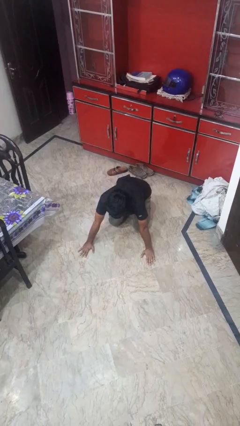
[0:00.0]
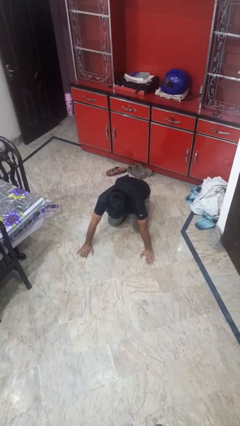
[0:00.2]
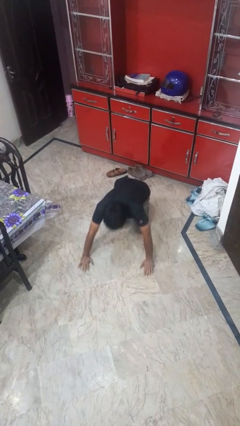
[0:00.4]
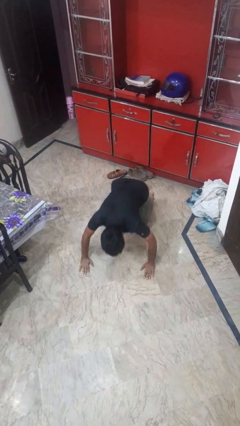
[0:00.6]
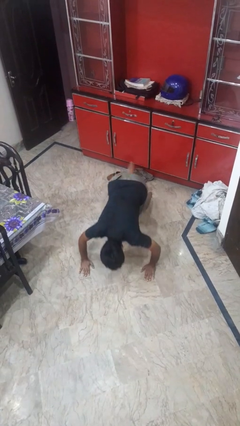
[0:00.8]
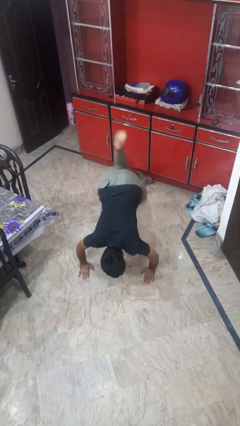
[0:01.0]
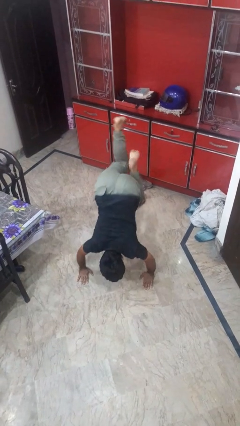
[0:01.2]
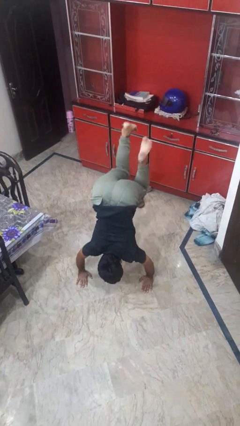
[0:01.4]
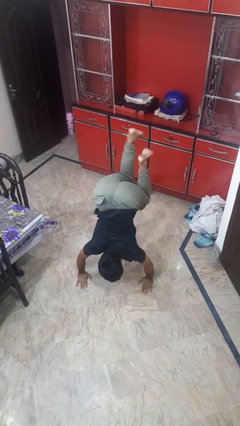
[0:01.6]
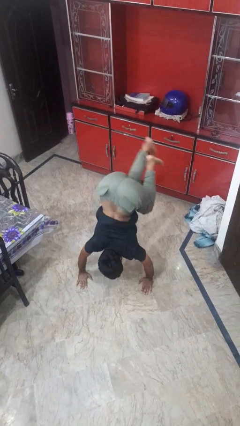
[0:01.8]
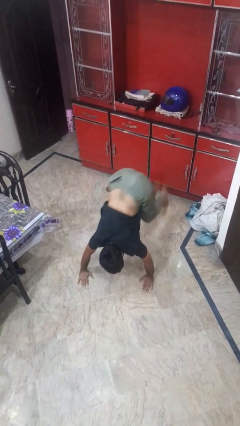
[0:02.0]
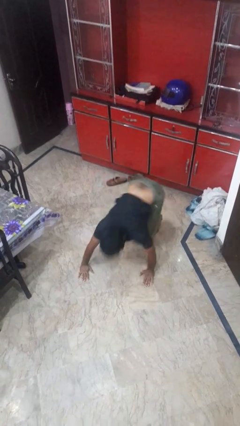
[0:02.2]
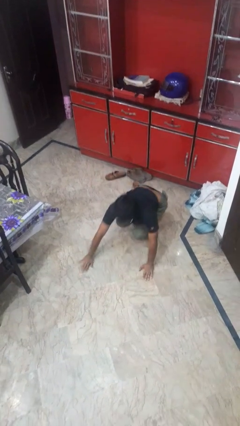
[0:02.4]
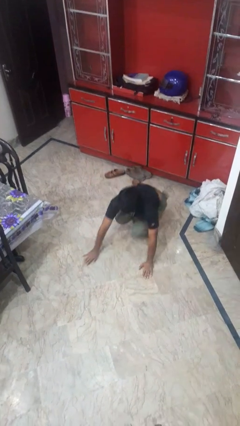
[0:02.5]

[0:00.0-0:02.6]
person handstand

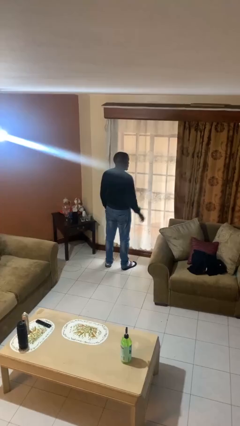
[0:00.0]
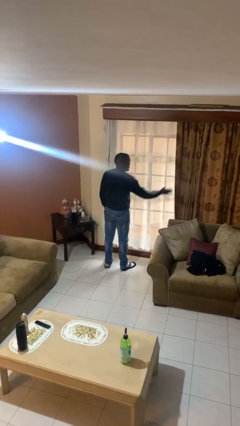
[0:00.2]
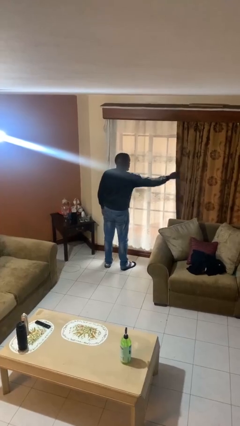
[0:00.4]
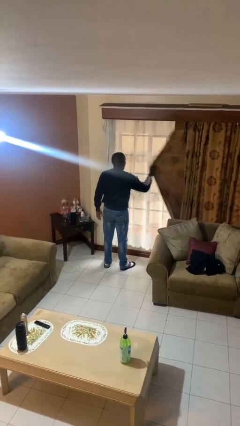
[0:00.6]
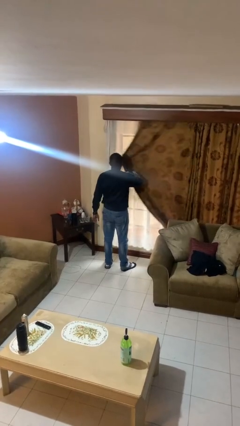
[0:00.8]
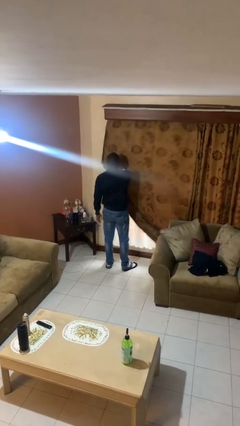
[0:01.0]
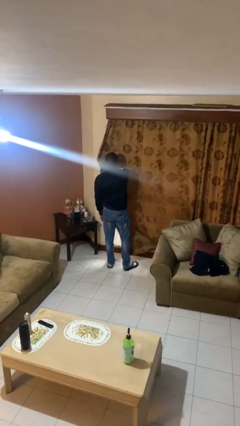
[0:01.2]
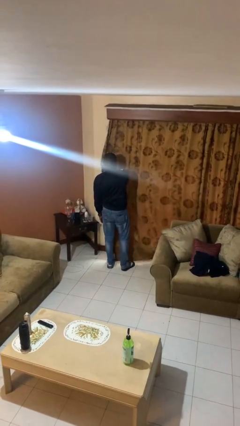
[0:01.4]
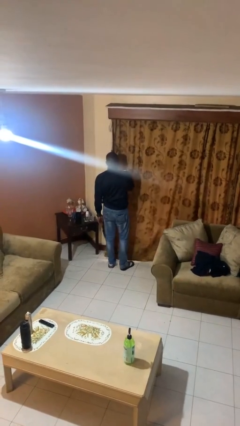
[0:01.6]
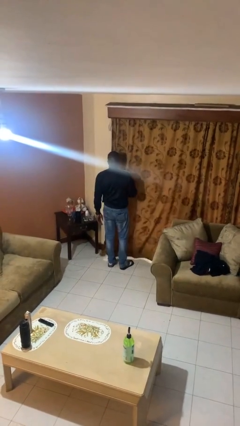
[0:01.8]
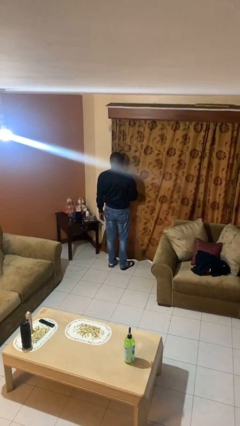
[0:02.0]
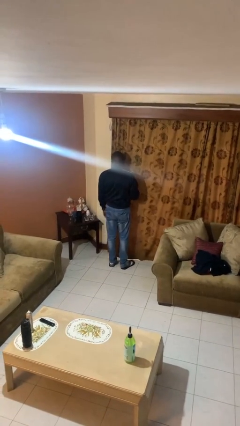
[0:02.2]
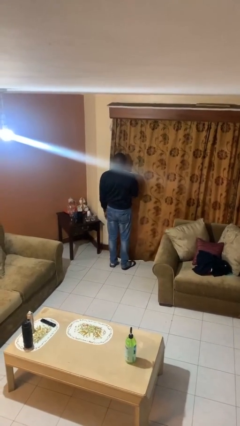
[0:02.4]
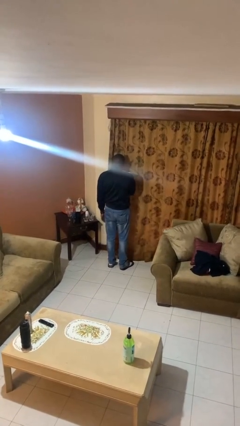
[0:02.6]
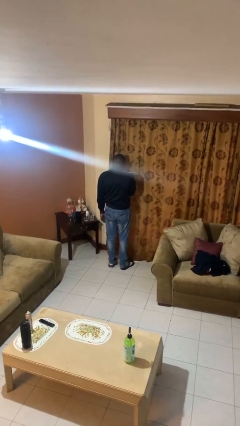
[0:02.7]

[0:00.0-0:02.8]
person closes curtains

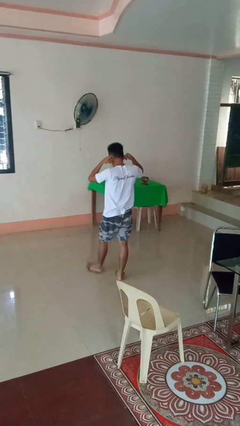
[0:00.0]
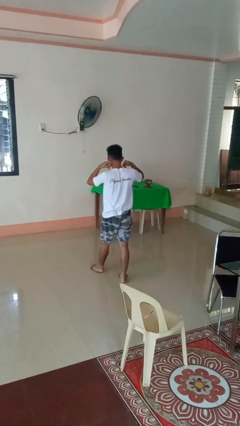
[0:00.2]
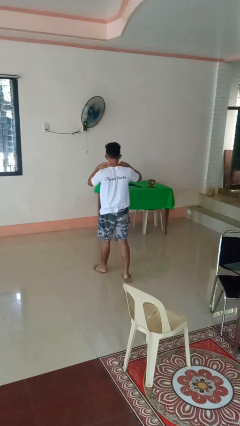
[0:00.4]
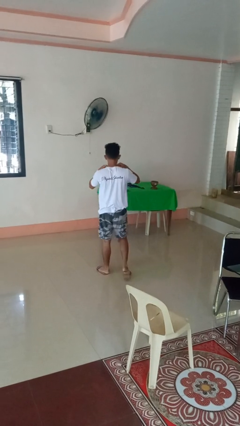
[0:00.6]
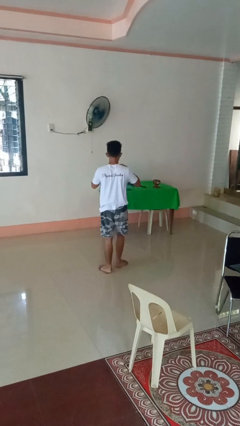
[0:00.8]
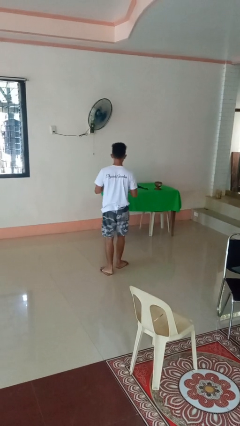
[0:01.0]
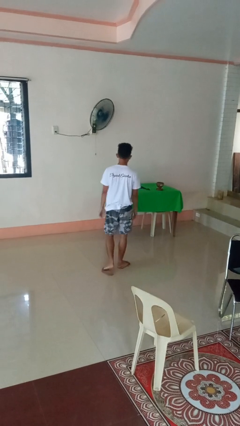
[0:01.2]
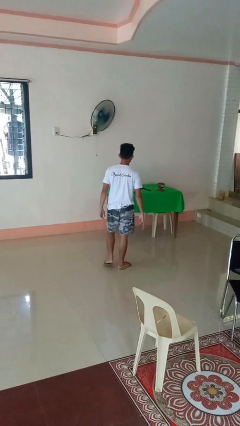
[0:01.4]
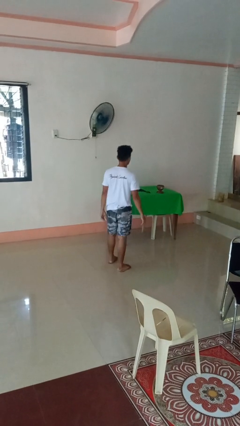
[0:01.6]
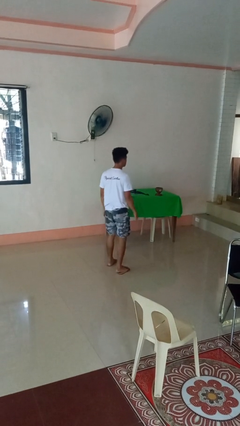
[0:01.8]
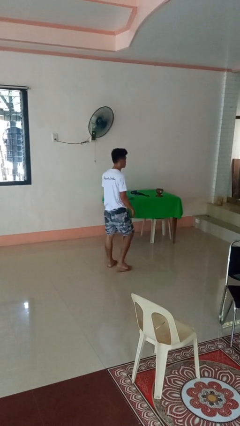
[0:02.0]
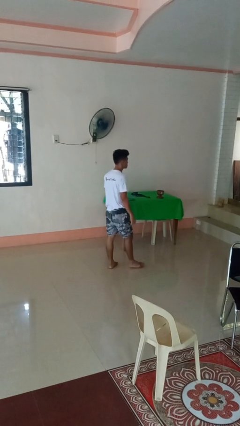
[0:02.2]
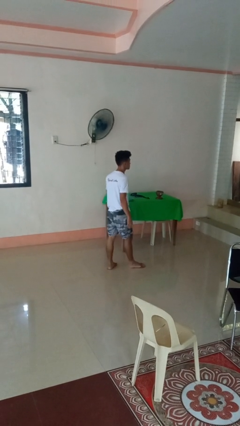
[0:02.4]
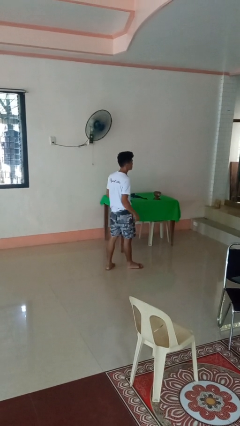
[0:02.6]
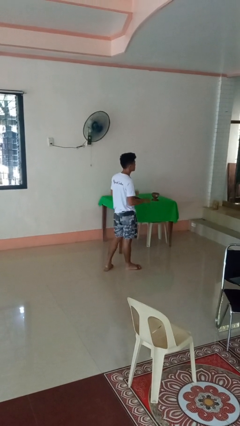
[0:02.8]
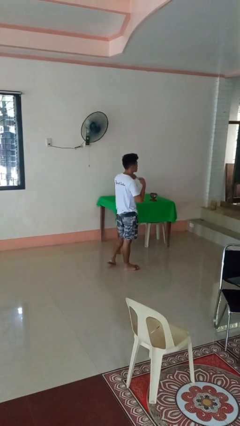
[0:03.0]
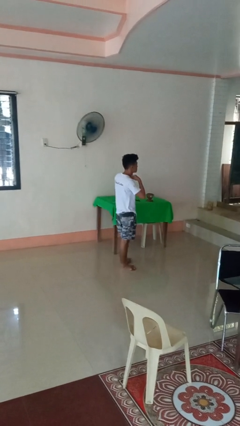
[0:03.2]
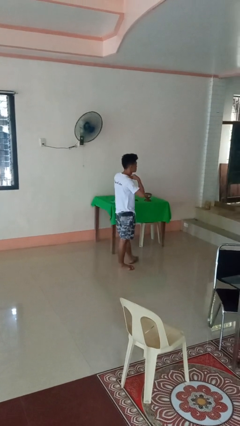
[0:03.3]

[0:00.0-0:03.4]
person puts on necklace

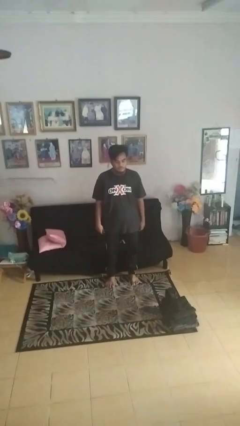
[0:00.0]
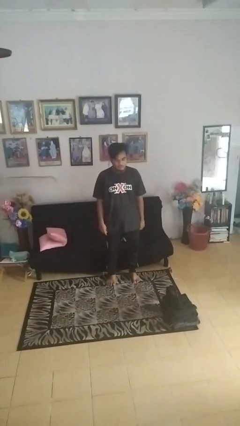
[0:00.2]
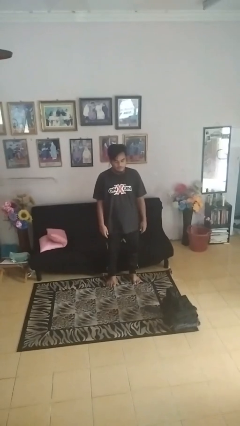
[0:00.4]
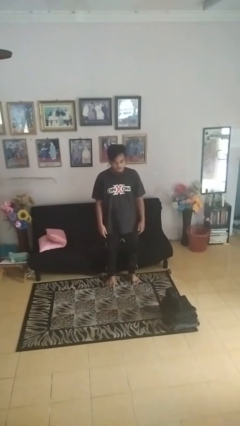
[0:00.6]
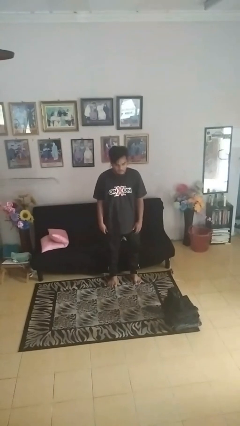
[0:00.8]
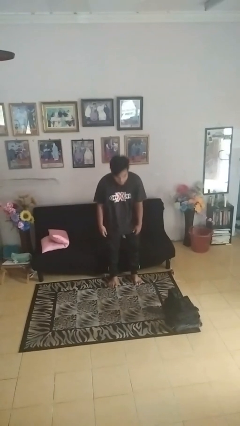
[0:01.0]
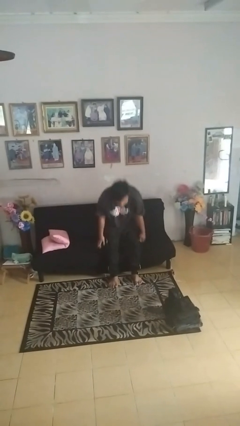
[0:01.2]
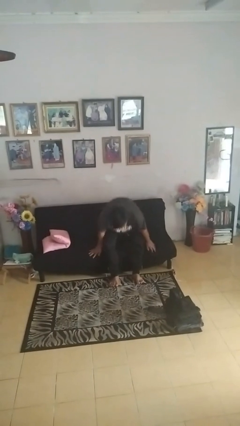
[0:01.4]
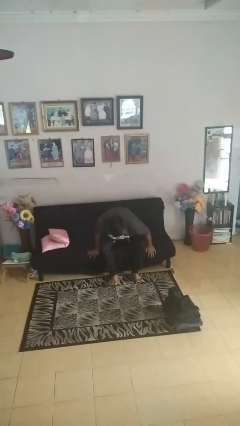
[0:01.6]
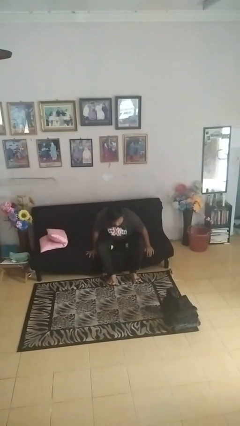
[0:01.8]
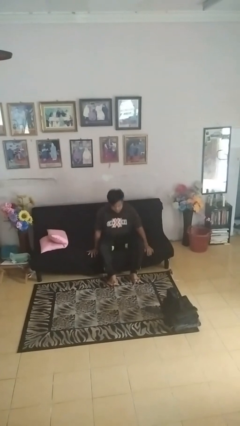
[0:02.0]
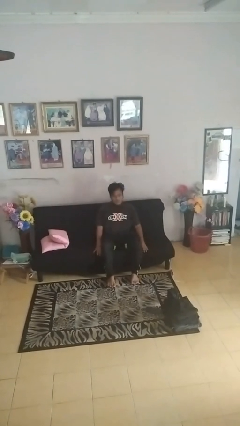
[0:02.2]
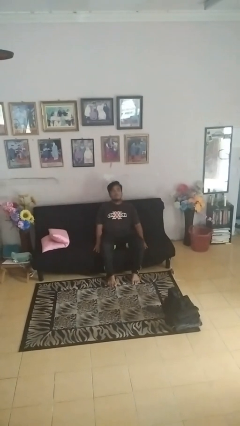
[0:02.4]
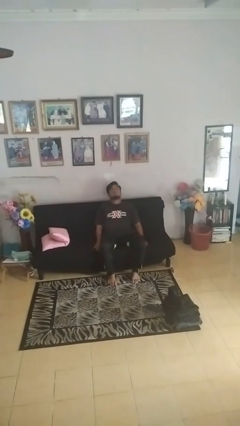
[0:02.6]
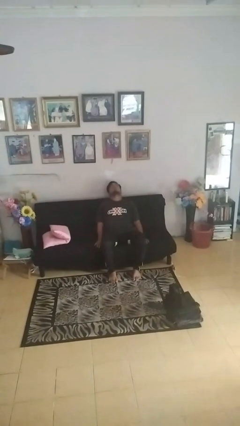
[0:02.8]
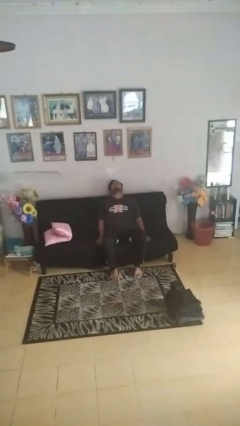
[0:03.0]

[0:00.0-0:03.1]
person lies down on couch

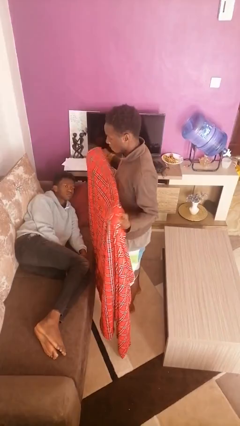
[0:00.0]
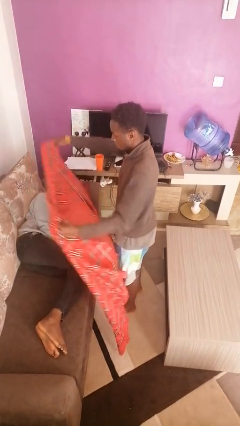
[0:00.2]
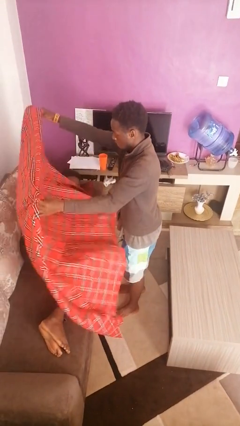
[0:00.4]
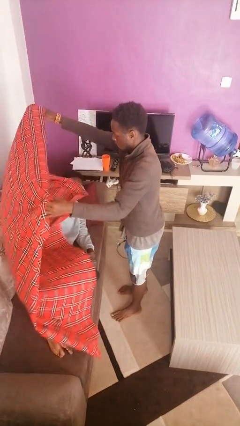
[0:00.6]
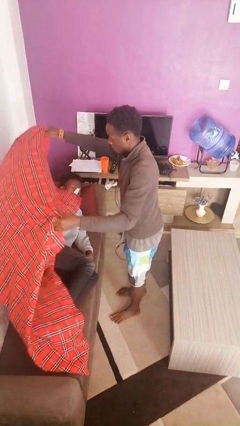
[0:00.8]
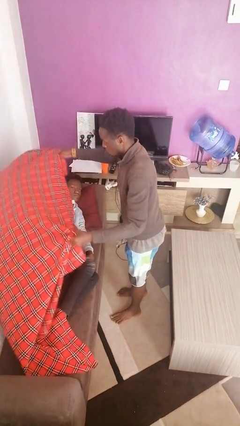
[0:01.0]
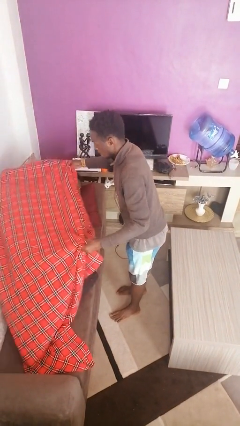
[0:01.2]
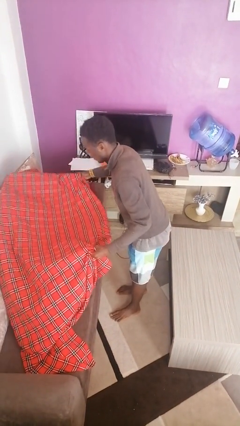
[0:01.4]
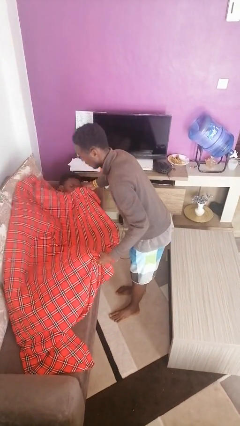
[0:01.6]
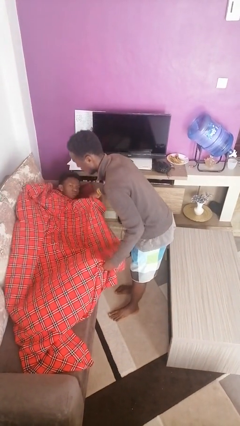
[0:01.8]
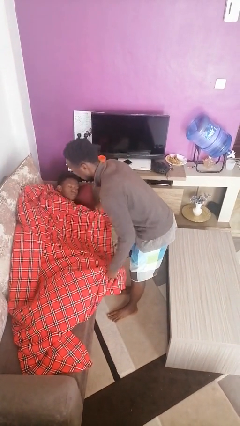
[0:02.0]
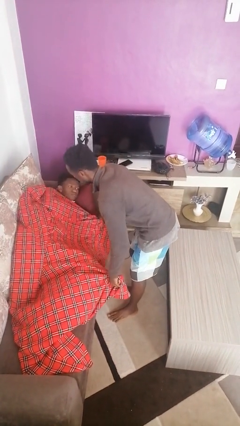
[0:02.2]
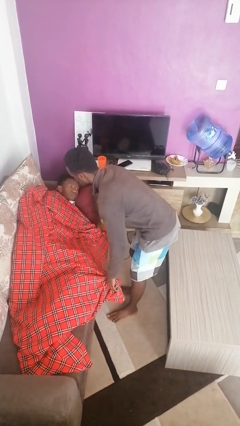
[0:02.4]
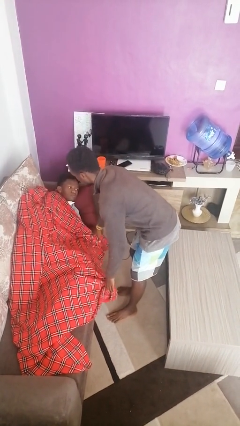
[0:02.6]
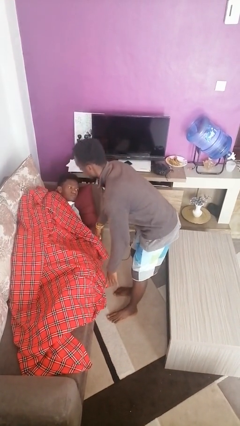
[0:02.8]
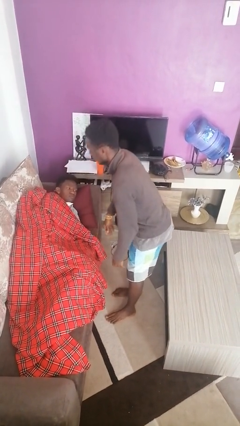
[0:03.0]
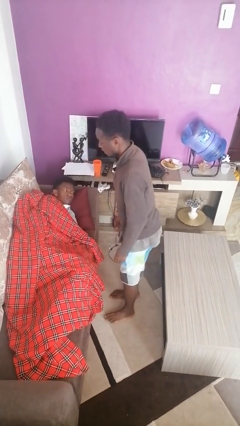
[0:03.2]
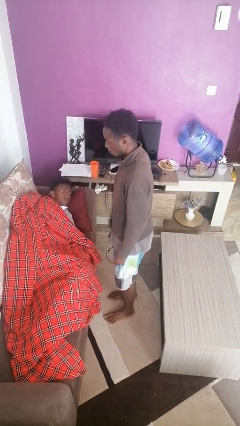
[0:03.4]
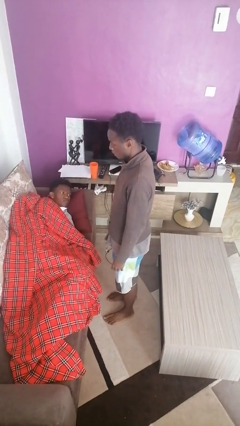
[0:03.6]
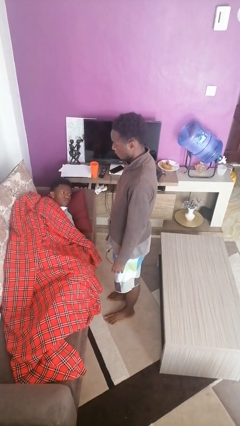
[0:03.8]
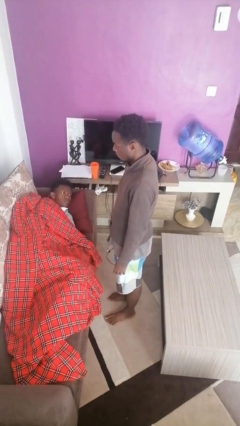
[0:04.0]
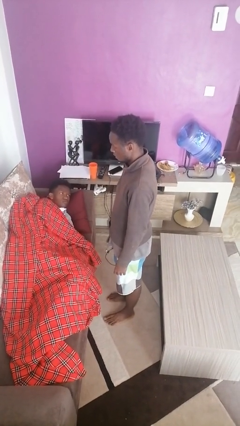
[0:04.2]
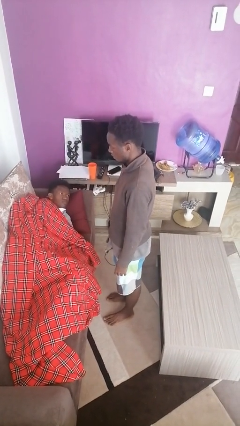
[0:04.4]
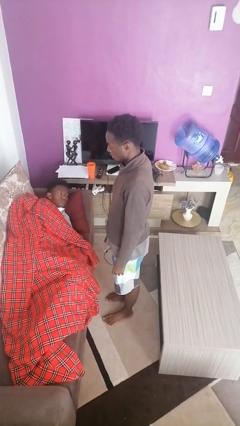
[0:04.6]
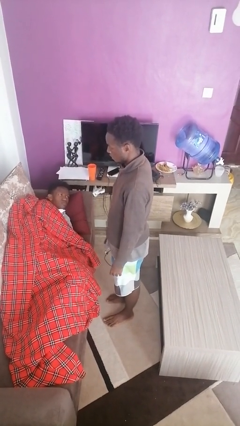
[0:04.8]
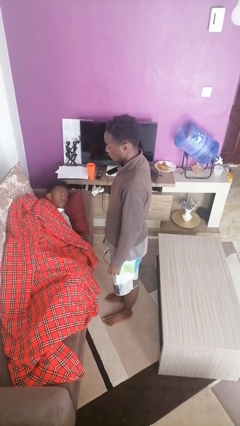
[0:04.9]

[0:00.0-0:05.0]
person covers friend with blanket

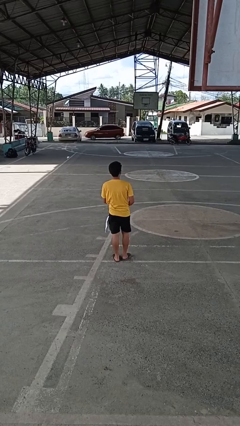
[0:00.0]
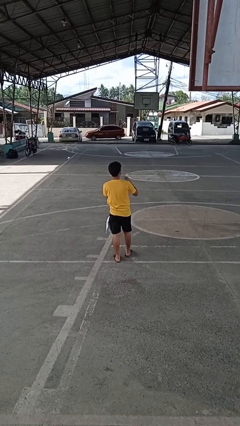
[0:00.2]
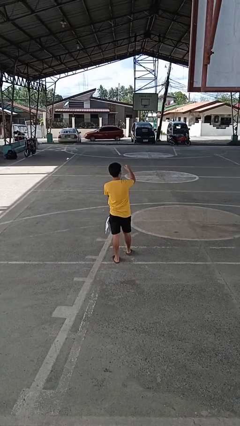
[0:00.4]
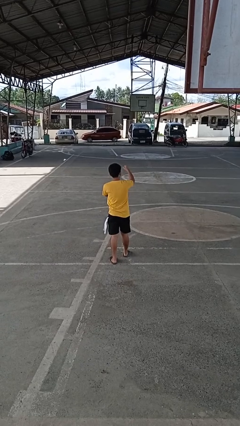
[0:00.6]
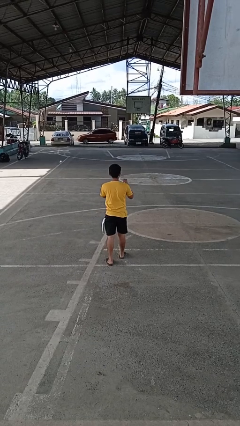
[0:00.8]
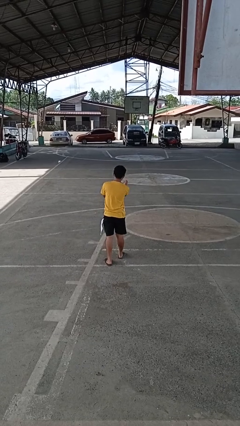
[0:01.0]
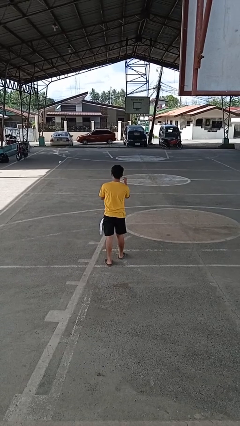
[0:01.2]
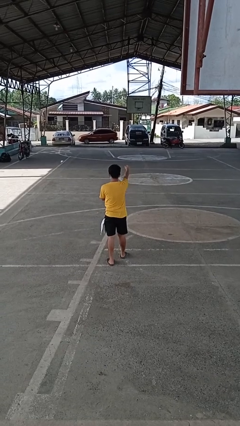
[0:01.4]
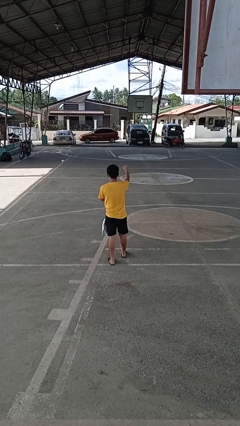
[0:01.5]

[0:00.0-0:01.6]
person punches
